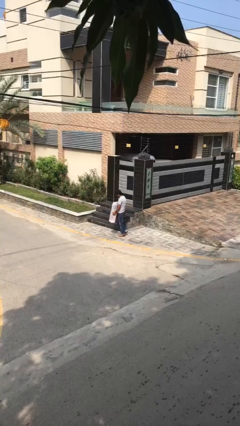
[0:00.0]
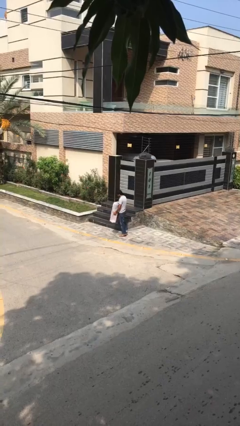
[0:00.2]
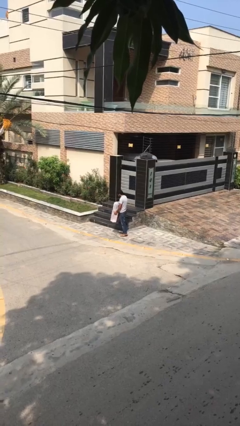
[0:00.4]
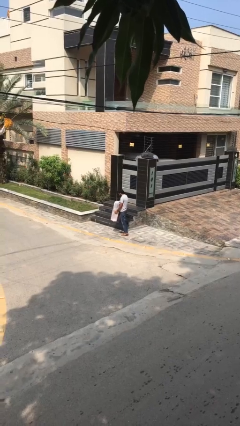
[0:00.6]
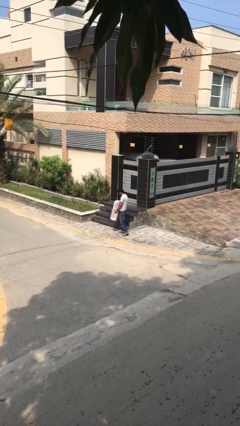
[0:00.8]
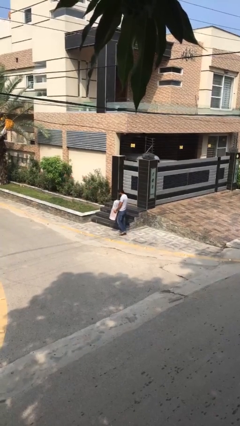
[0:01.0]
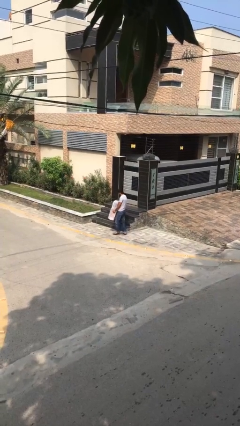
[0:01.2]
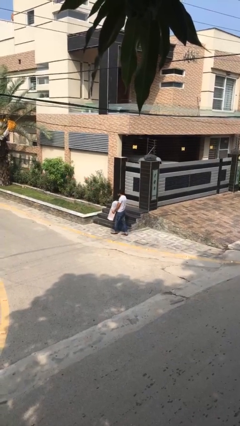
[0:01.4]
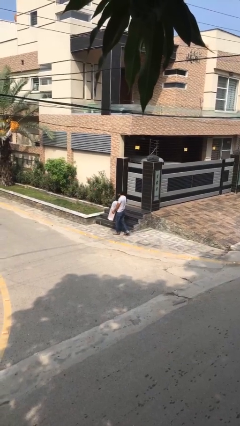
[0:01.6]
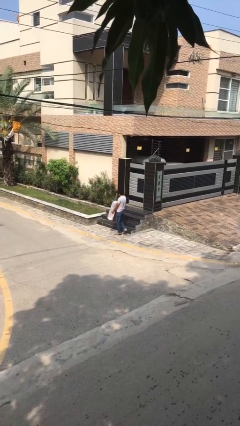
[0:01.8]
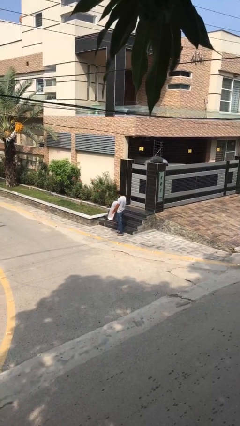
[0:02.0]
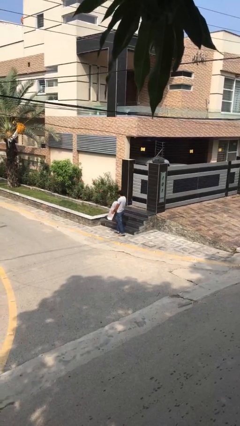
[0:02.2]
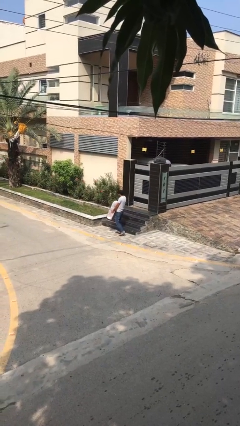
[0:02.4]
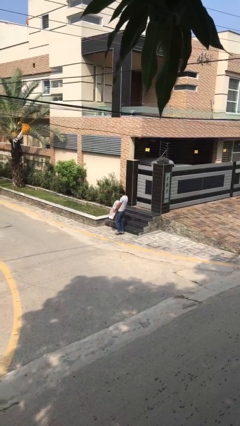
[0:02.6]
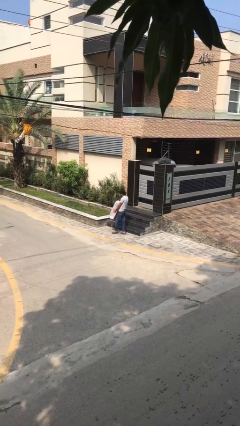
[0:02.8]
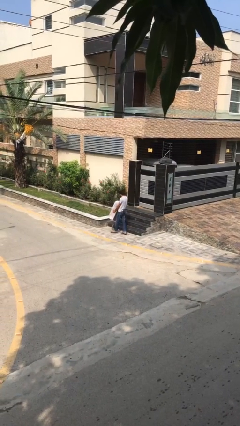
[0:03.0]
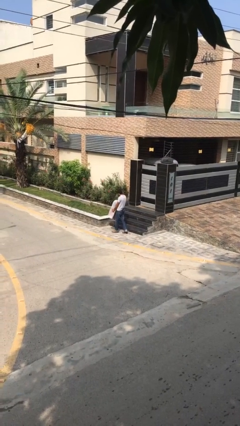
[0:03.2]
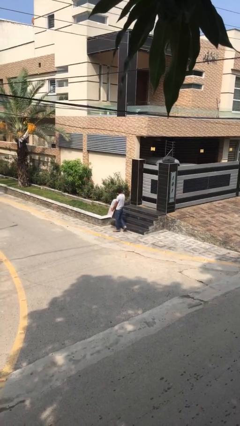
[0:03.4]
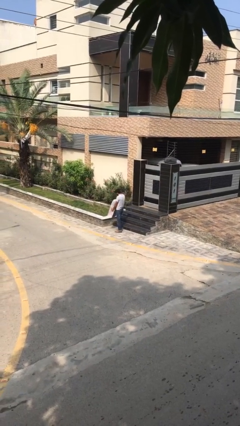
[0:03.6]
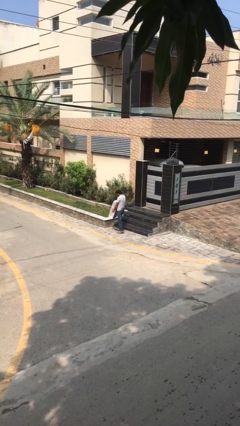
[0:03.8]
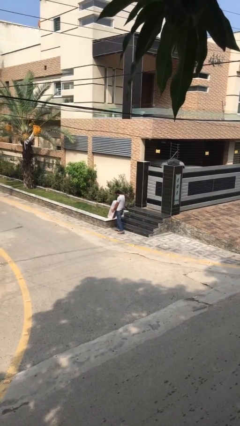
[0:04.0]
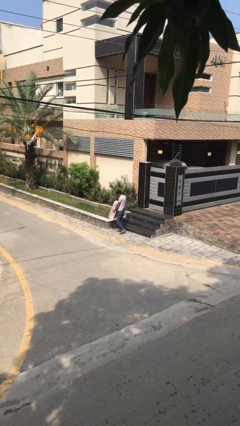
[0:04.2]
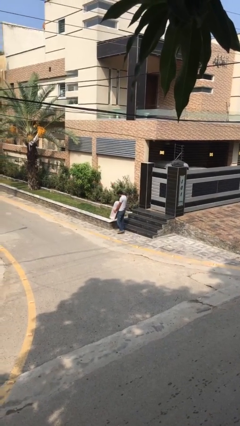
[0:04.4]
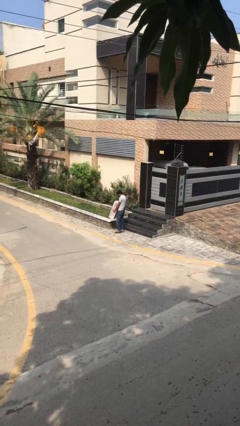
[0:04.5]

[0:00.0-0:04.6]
person carries heavy object

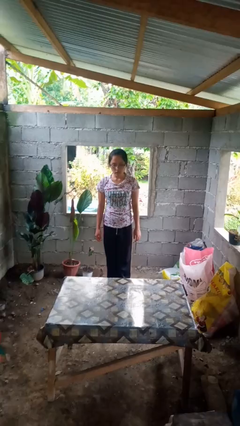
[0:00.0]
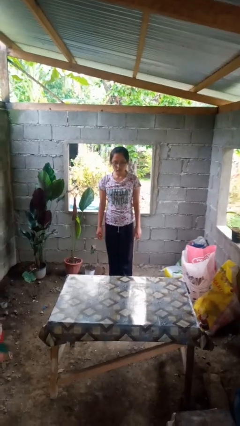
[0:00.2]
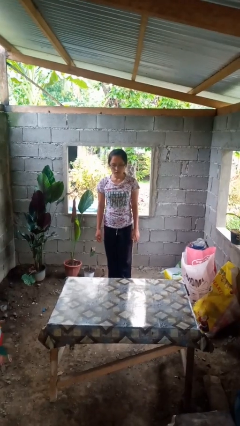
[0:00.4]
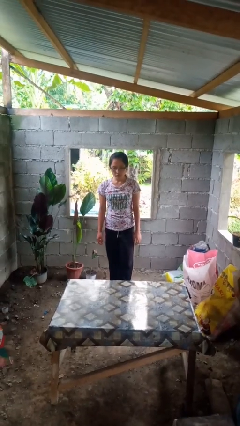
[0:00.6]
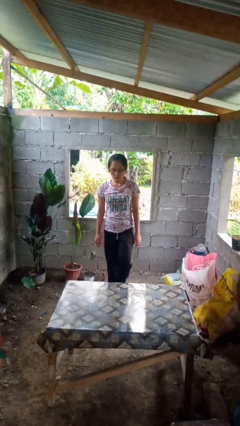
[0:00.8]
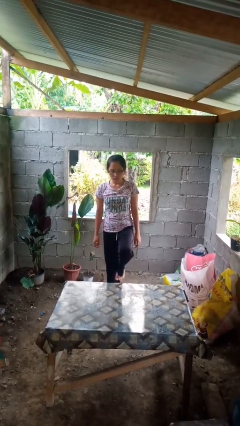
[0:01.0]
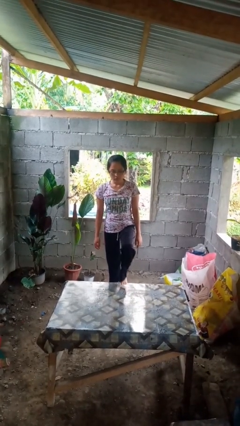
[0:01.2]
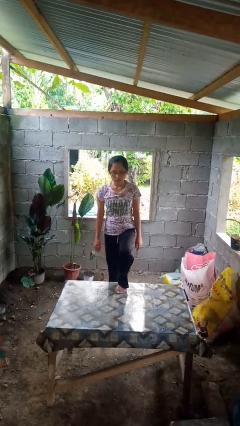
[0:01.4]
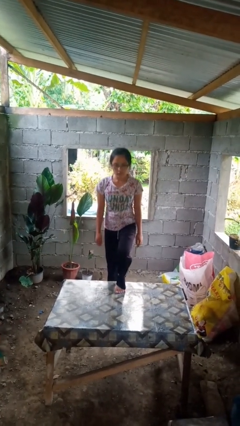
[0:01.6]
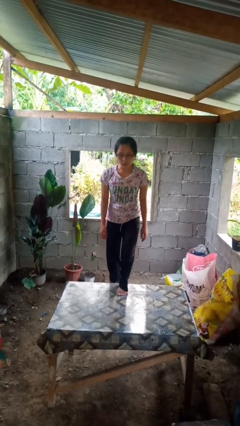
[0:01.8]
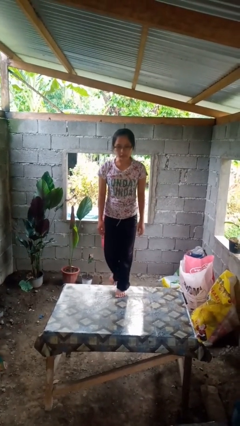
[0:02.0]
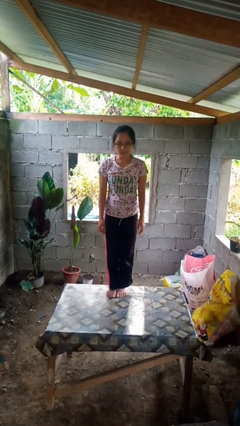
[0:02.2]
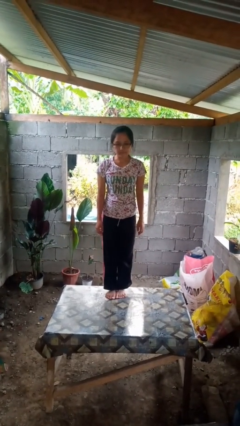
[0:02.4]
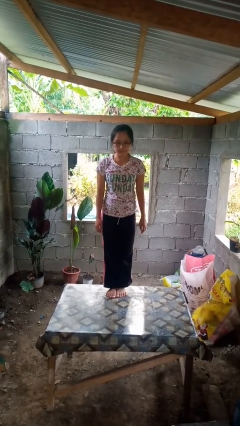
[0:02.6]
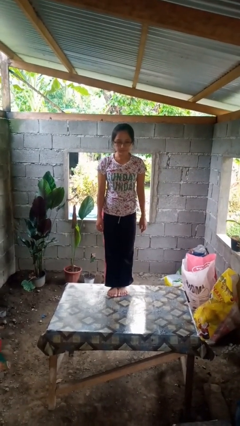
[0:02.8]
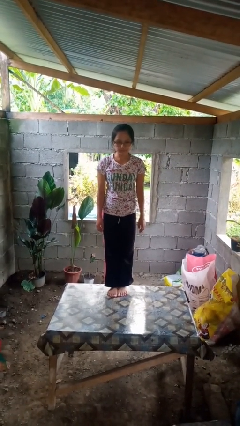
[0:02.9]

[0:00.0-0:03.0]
person climbs on table

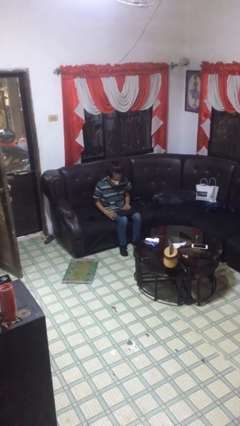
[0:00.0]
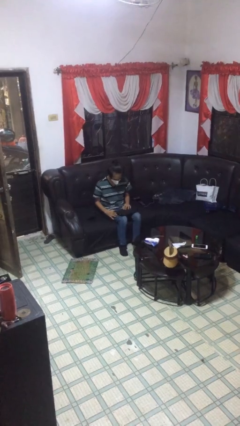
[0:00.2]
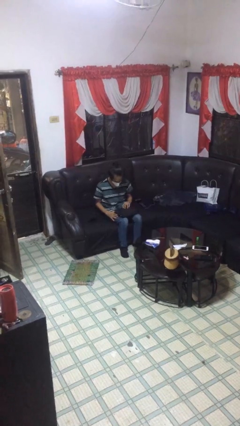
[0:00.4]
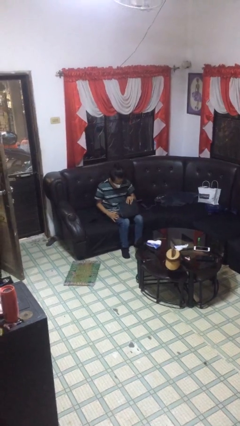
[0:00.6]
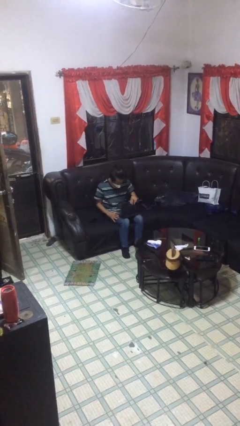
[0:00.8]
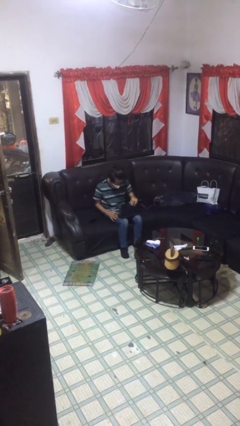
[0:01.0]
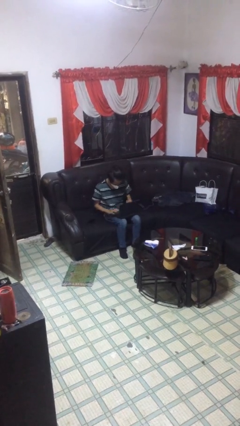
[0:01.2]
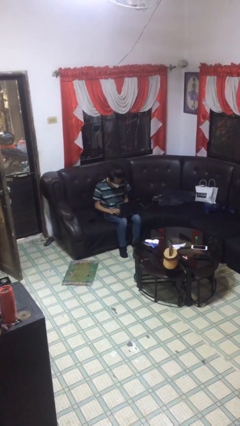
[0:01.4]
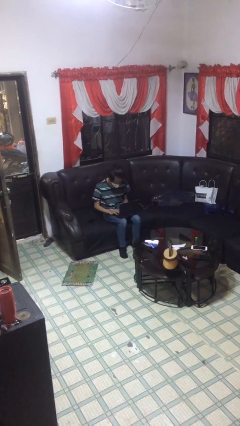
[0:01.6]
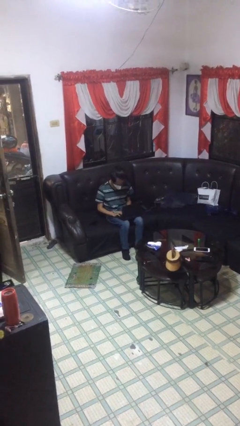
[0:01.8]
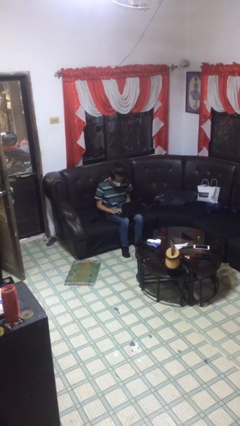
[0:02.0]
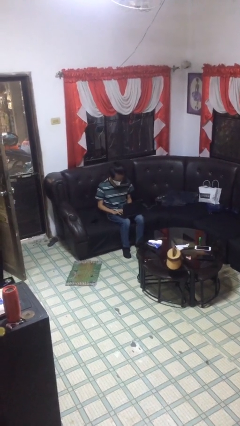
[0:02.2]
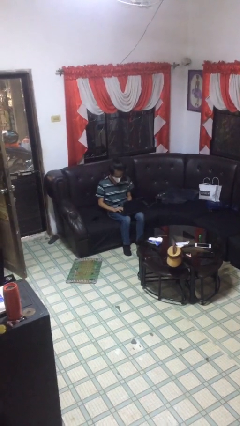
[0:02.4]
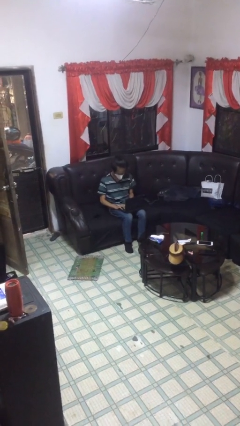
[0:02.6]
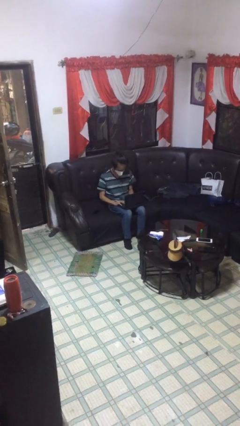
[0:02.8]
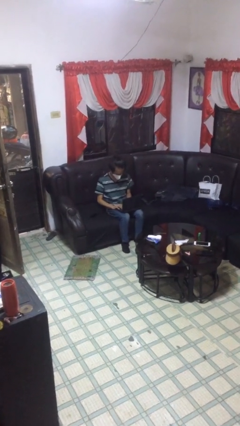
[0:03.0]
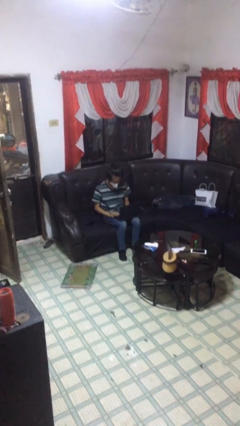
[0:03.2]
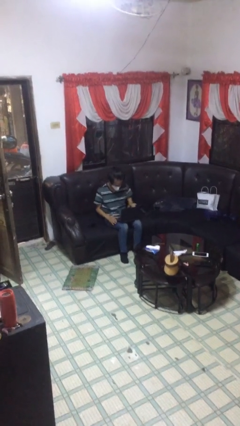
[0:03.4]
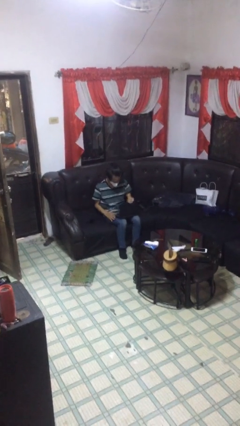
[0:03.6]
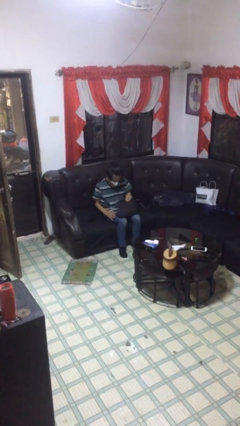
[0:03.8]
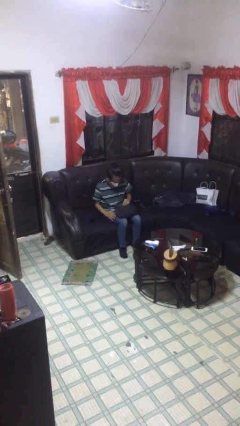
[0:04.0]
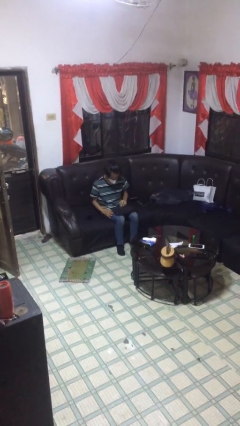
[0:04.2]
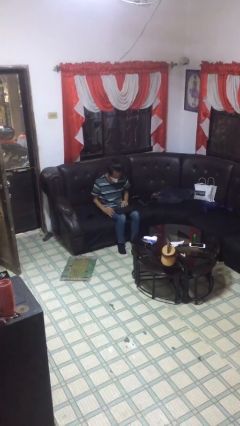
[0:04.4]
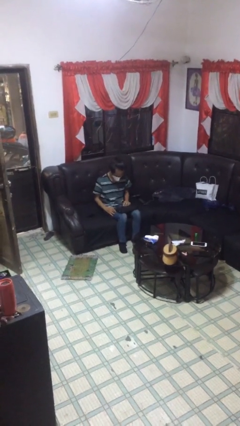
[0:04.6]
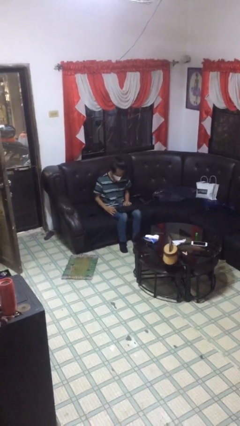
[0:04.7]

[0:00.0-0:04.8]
person interacts with laptop

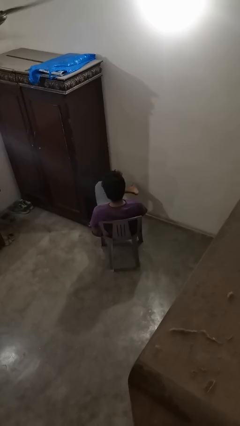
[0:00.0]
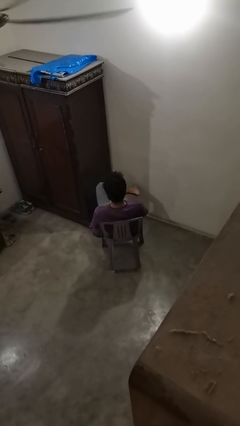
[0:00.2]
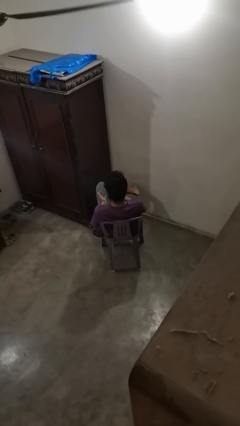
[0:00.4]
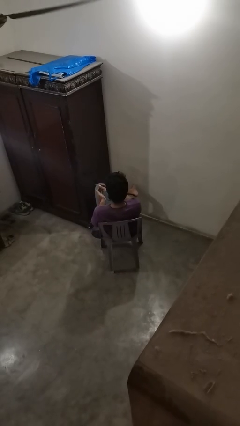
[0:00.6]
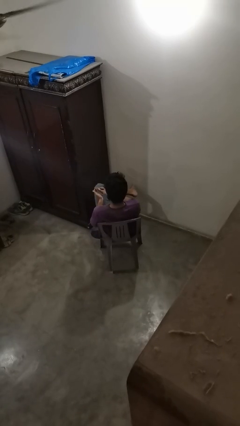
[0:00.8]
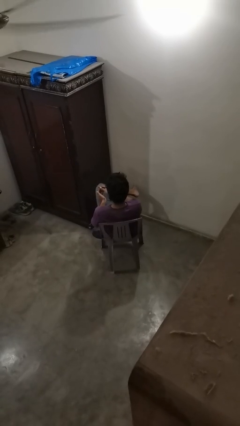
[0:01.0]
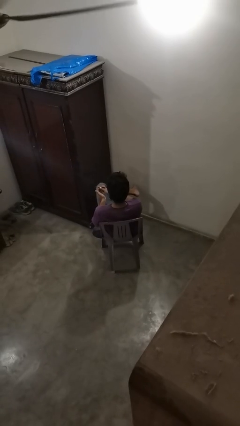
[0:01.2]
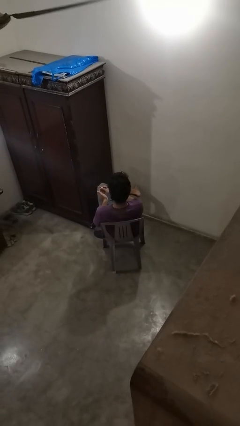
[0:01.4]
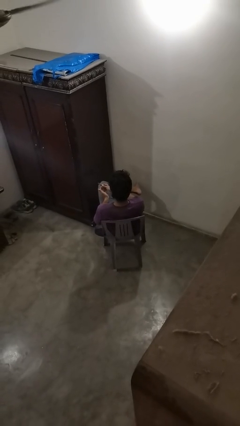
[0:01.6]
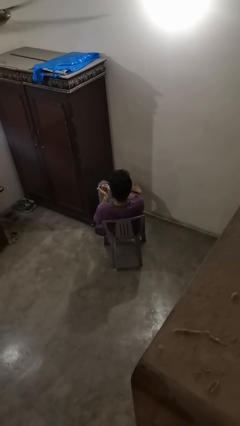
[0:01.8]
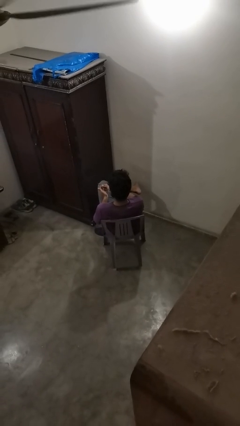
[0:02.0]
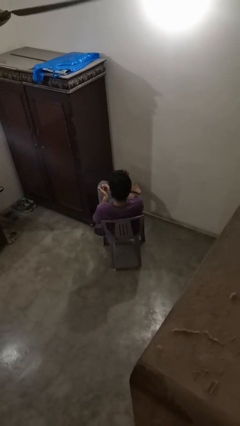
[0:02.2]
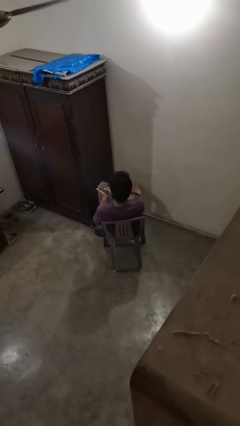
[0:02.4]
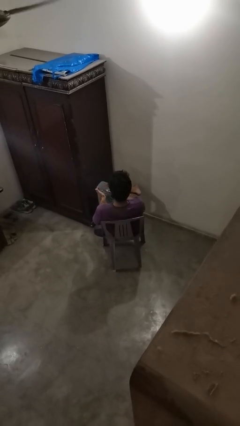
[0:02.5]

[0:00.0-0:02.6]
person files fingernails

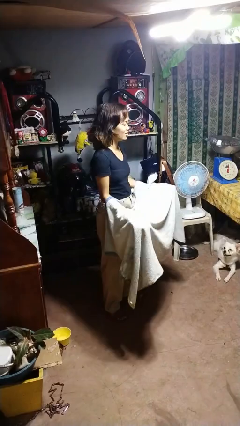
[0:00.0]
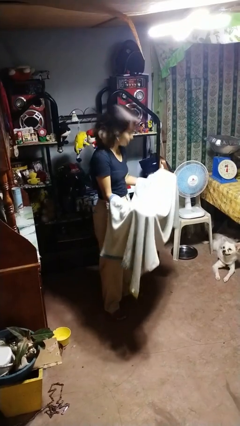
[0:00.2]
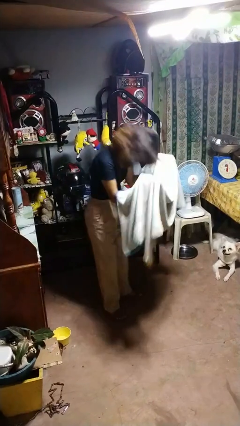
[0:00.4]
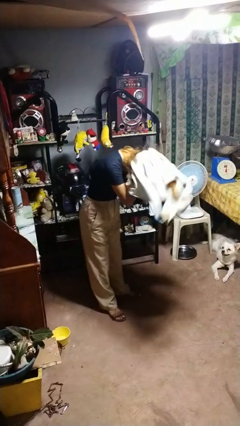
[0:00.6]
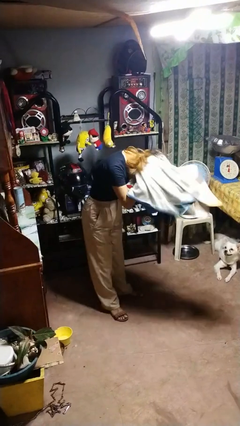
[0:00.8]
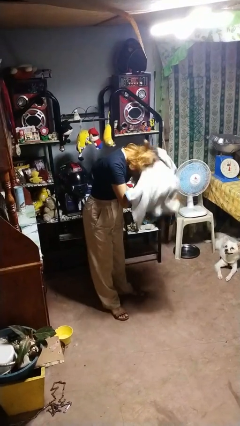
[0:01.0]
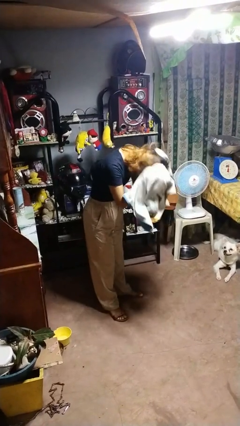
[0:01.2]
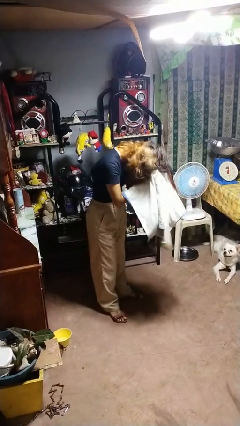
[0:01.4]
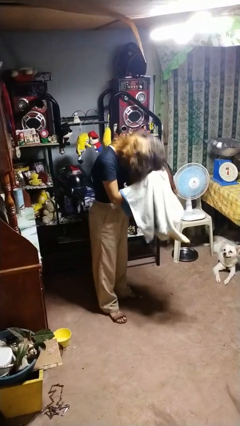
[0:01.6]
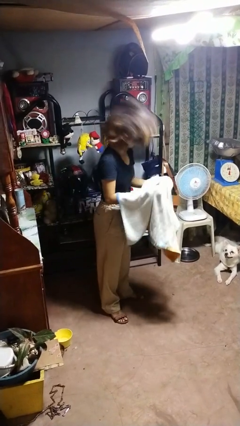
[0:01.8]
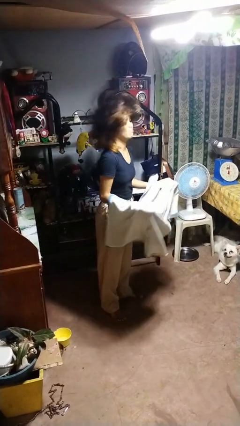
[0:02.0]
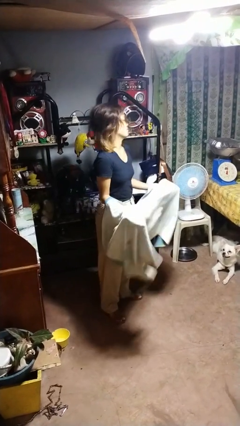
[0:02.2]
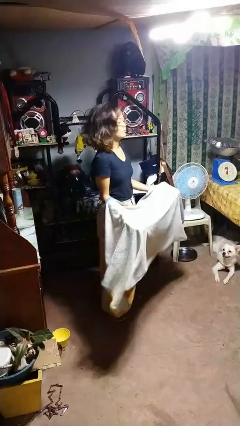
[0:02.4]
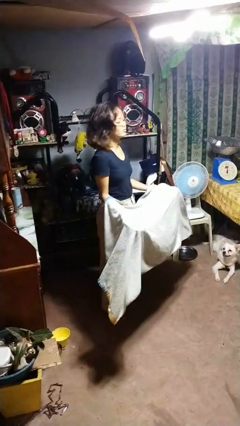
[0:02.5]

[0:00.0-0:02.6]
person dries hair with towel
